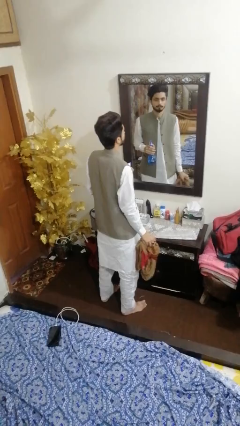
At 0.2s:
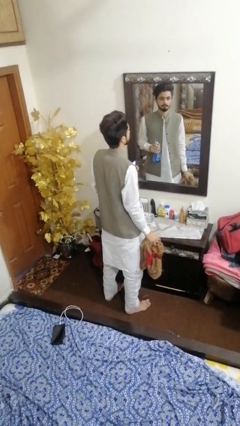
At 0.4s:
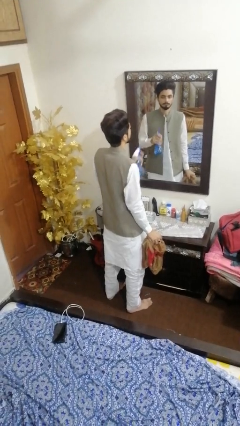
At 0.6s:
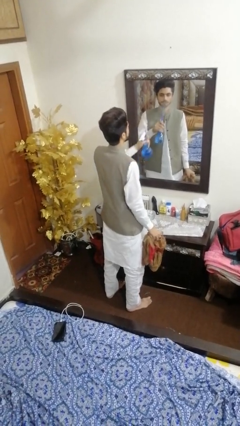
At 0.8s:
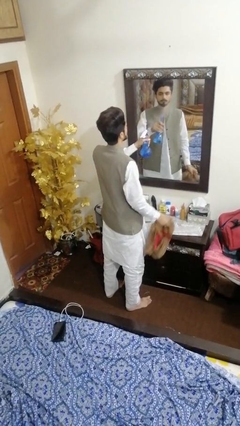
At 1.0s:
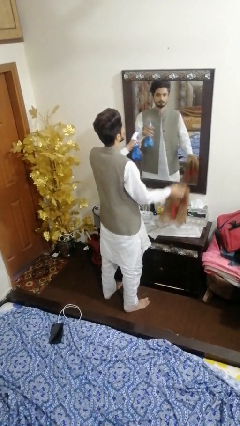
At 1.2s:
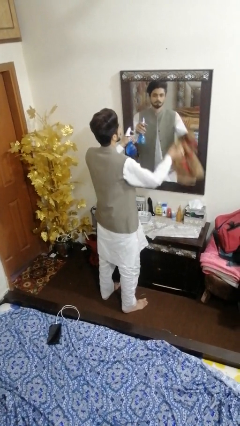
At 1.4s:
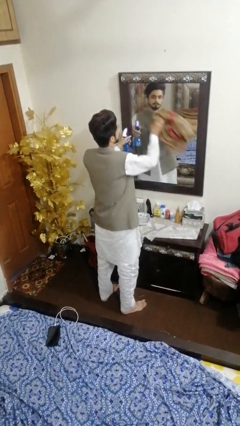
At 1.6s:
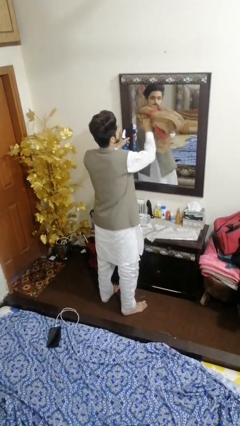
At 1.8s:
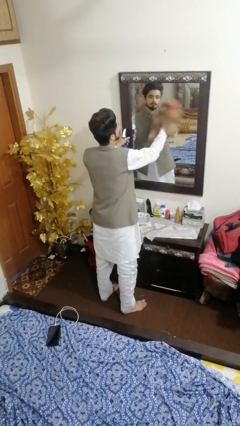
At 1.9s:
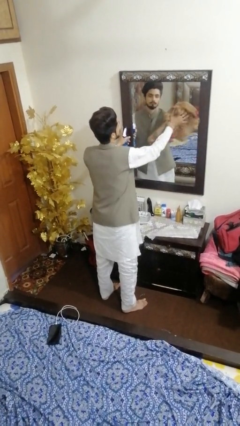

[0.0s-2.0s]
person sprays from bottle

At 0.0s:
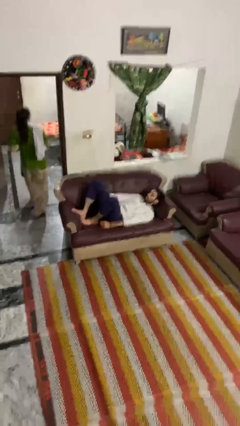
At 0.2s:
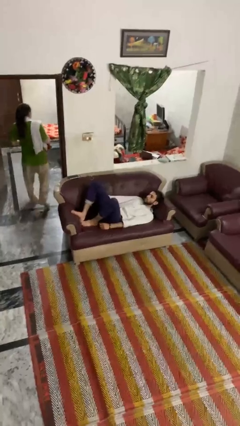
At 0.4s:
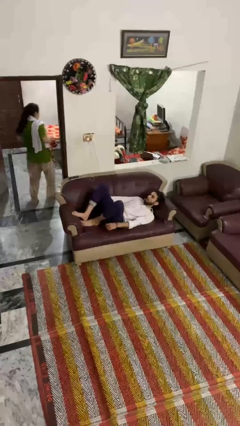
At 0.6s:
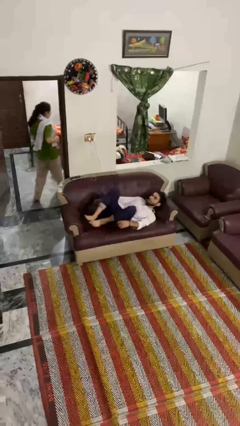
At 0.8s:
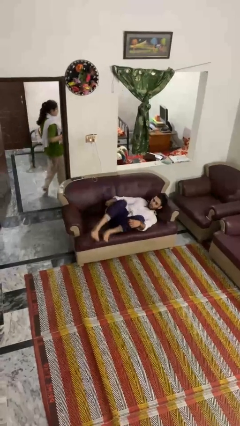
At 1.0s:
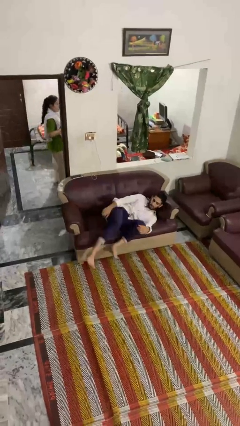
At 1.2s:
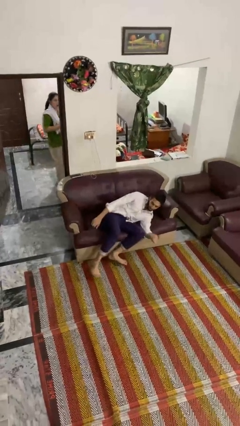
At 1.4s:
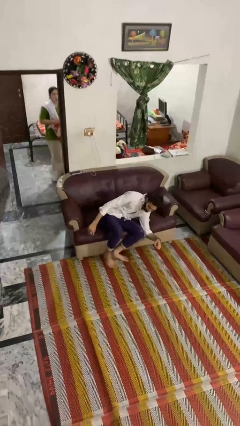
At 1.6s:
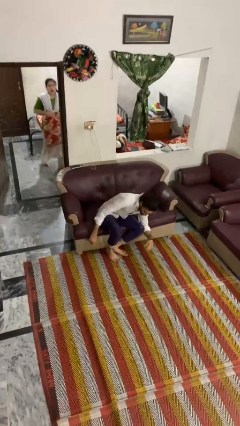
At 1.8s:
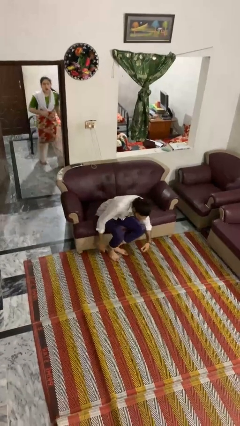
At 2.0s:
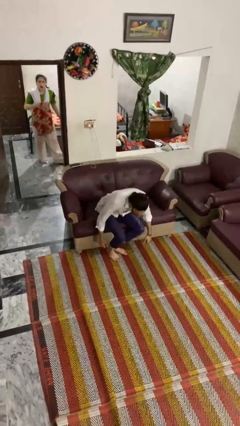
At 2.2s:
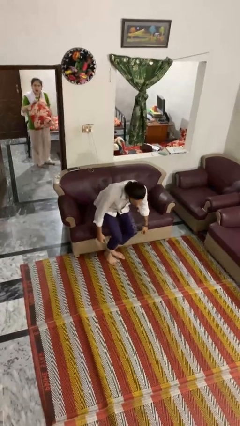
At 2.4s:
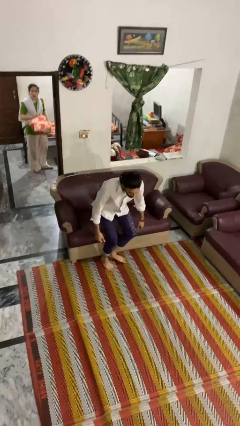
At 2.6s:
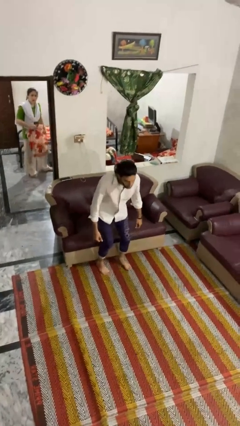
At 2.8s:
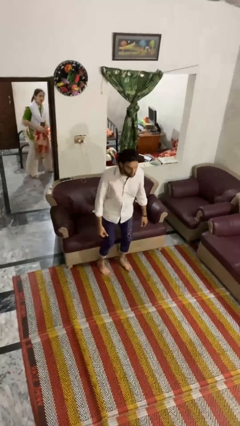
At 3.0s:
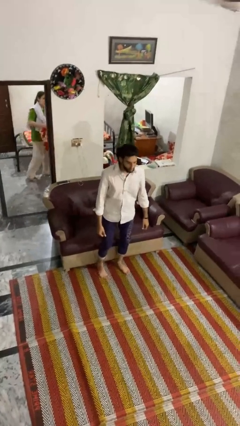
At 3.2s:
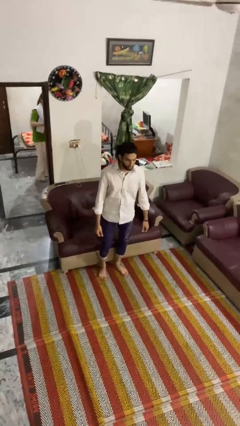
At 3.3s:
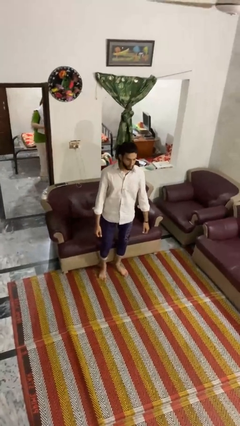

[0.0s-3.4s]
person stands up

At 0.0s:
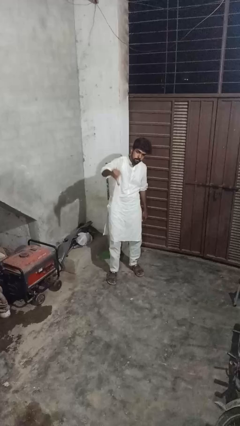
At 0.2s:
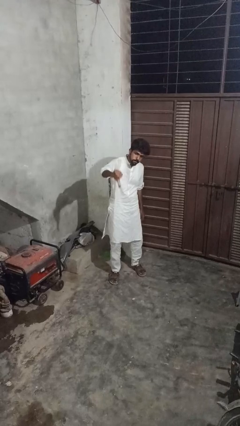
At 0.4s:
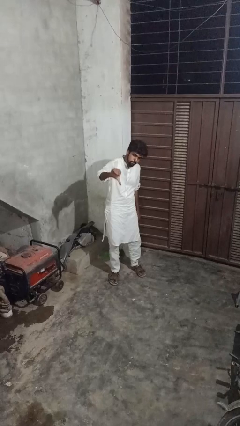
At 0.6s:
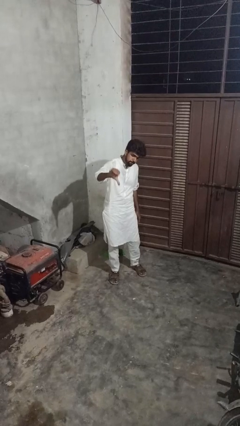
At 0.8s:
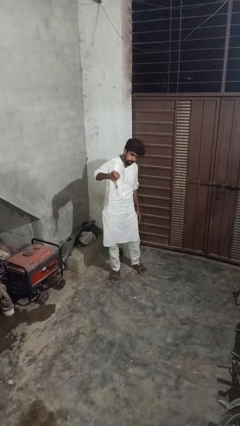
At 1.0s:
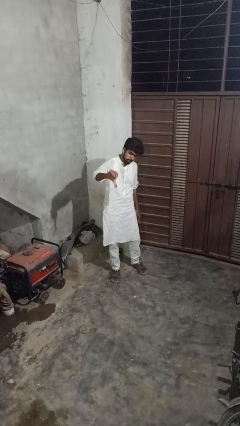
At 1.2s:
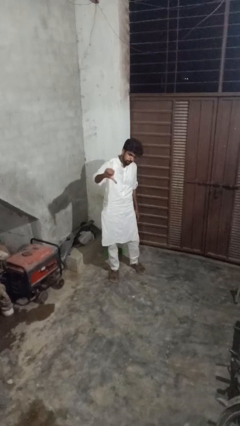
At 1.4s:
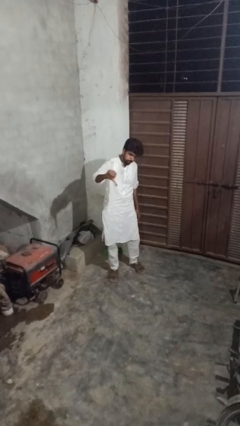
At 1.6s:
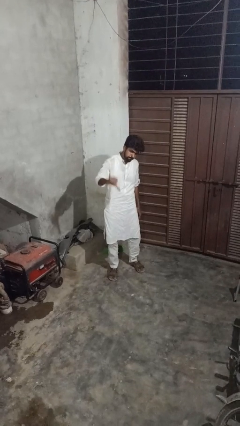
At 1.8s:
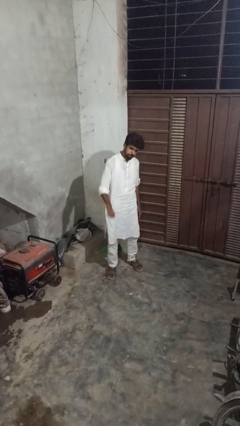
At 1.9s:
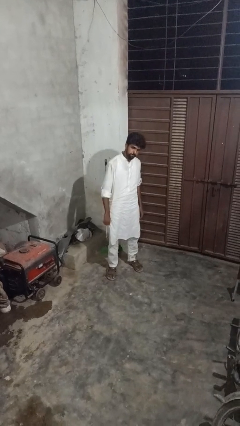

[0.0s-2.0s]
person gestures thumbs down

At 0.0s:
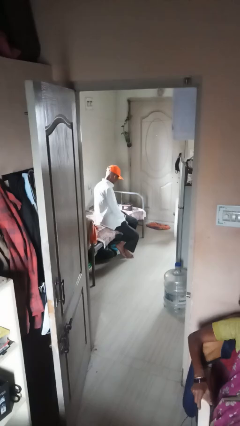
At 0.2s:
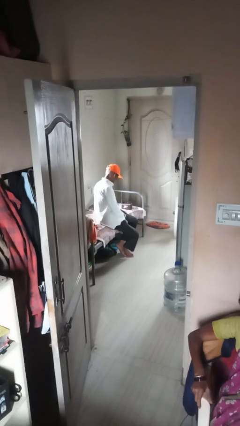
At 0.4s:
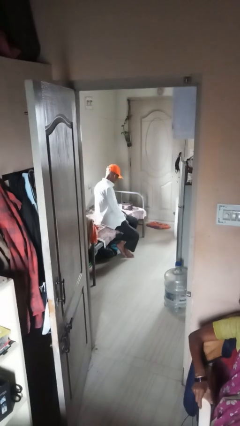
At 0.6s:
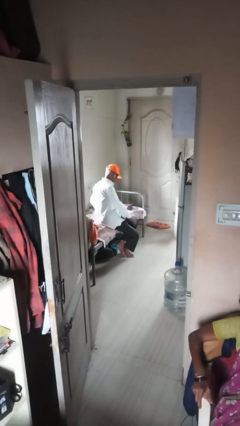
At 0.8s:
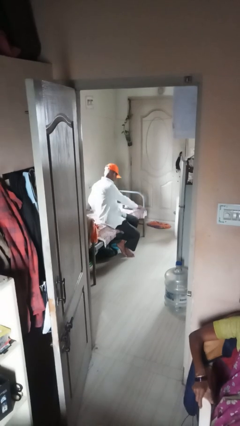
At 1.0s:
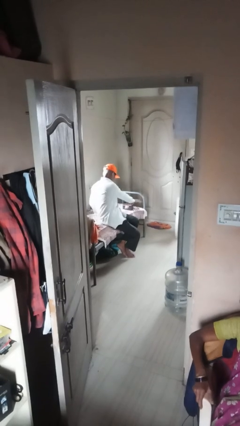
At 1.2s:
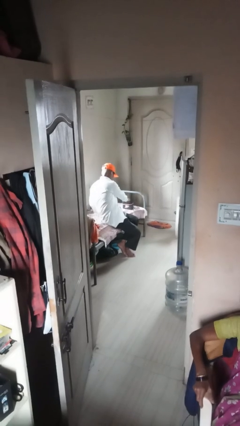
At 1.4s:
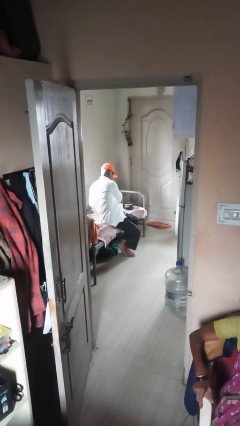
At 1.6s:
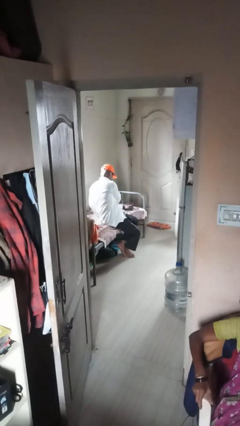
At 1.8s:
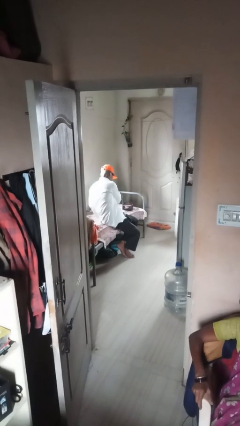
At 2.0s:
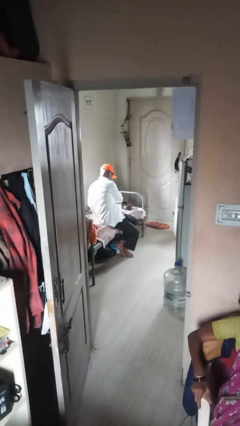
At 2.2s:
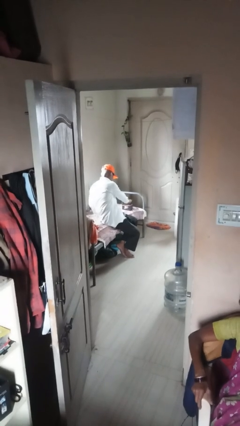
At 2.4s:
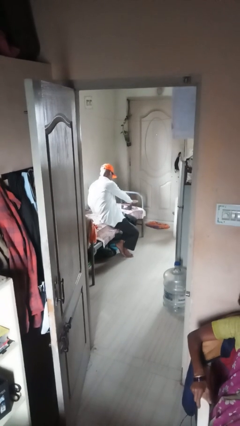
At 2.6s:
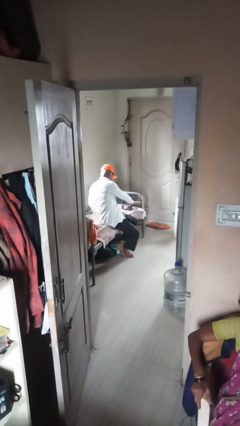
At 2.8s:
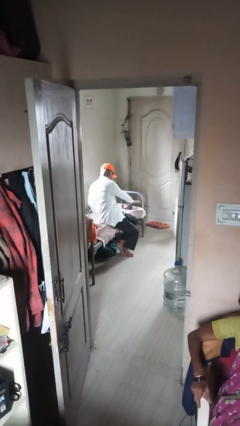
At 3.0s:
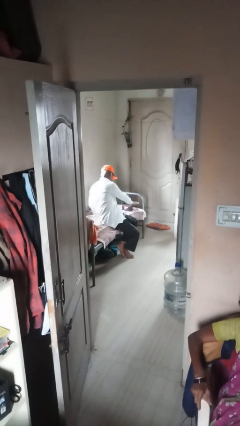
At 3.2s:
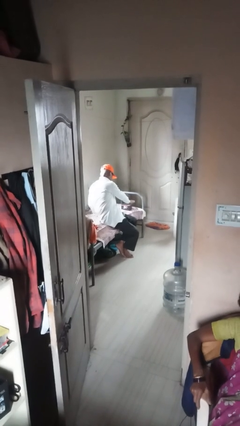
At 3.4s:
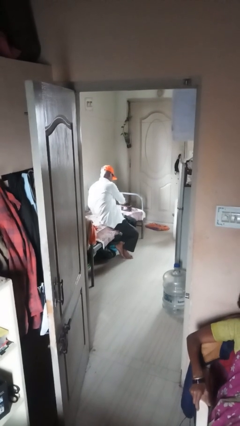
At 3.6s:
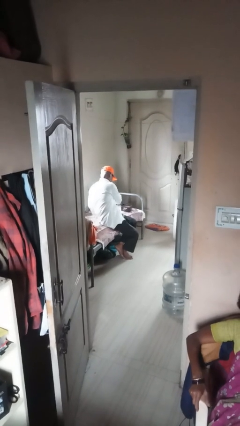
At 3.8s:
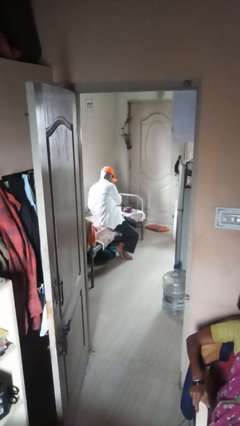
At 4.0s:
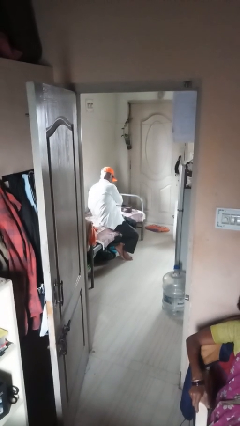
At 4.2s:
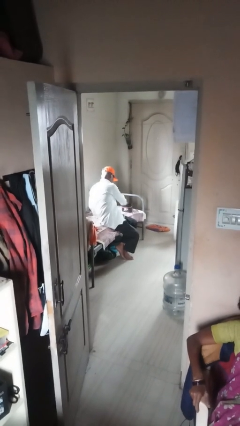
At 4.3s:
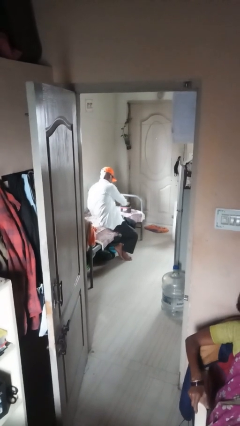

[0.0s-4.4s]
person waves hand over object

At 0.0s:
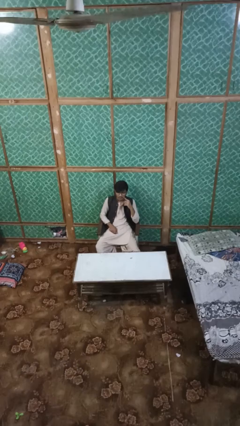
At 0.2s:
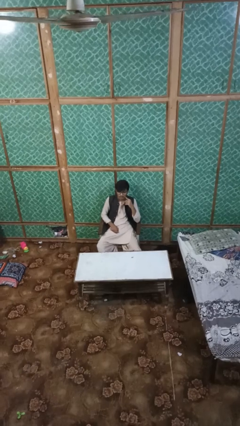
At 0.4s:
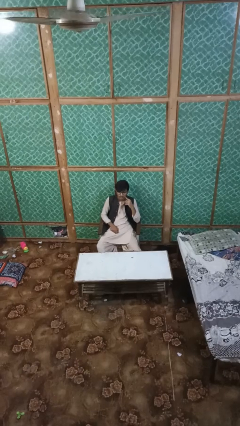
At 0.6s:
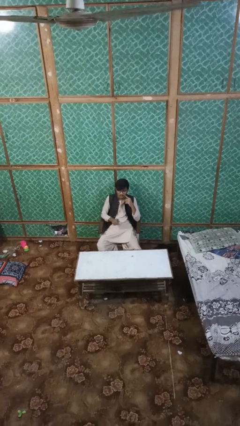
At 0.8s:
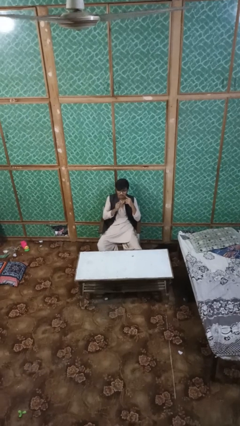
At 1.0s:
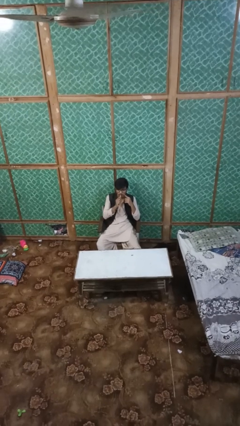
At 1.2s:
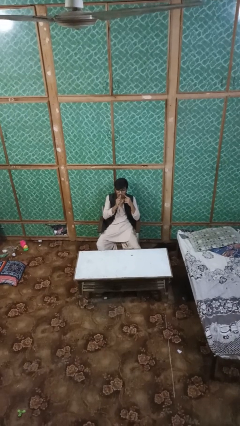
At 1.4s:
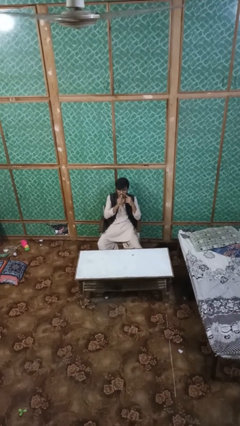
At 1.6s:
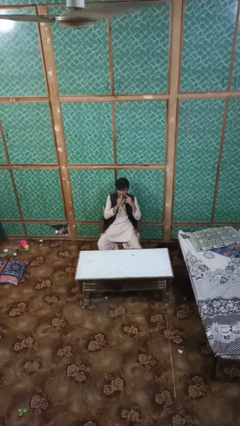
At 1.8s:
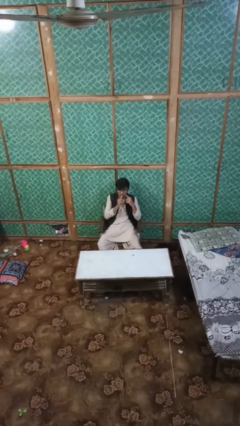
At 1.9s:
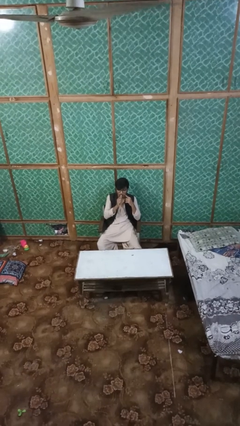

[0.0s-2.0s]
person vapes

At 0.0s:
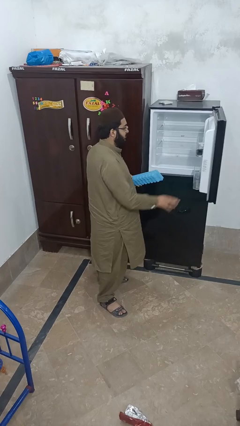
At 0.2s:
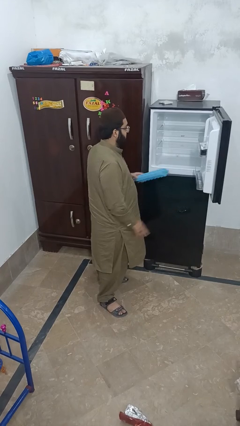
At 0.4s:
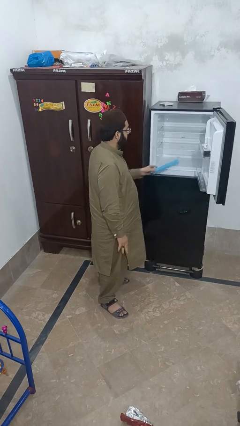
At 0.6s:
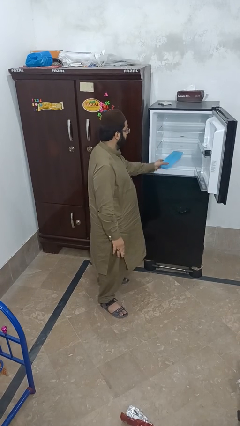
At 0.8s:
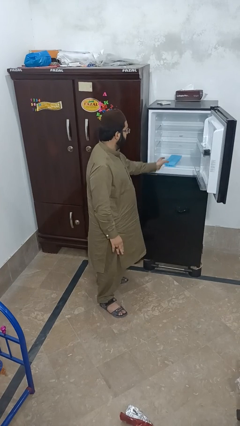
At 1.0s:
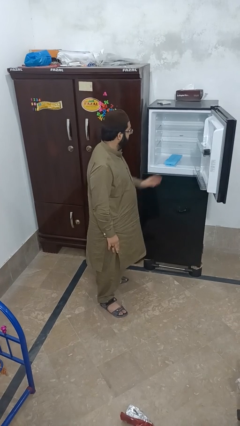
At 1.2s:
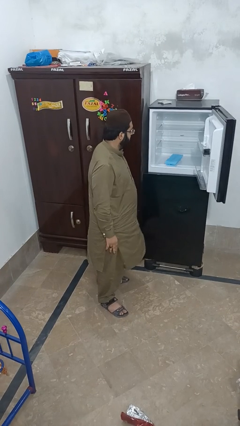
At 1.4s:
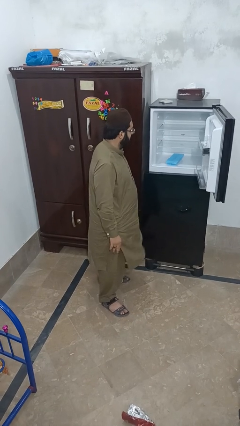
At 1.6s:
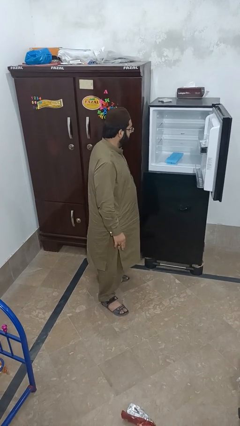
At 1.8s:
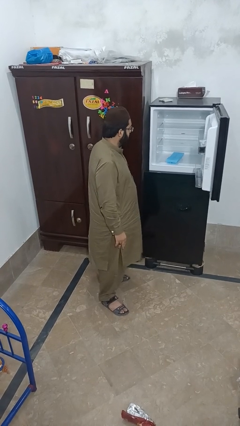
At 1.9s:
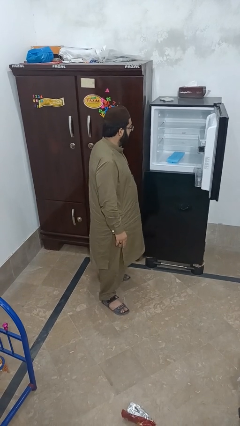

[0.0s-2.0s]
person puts object into refrigerator

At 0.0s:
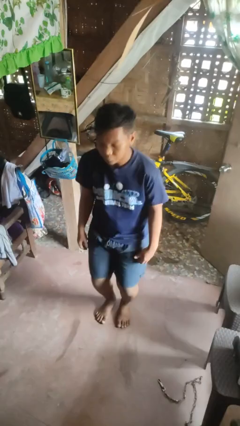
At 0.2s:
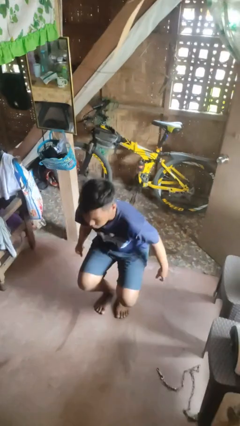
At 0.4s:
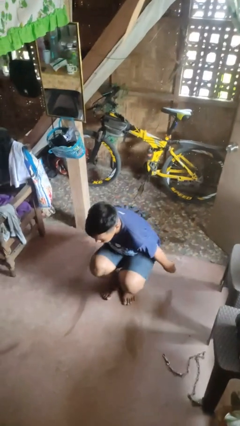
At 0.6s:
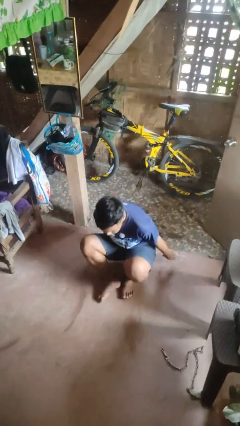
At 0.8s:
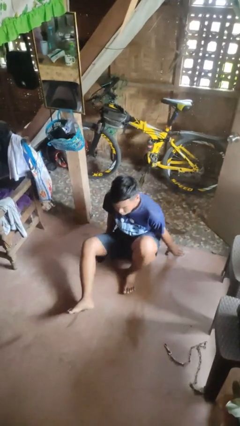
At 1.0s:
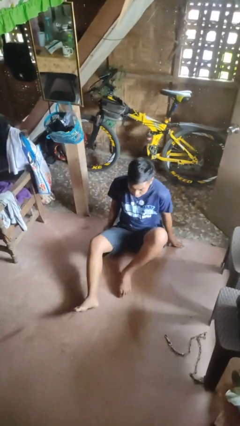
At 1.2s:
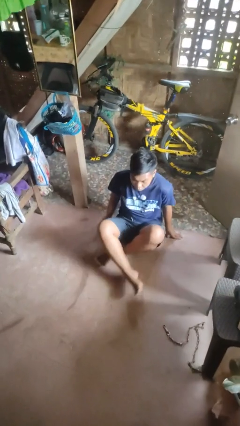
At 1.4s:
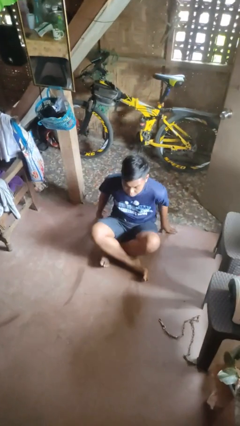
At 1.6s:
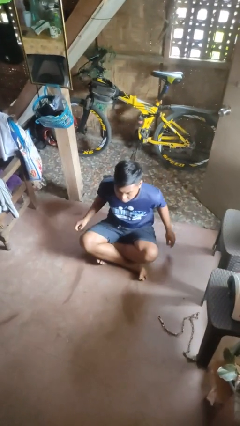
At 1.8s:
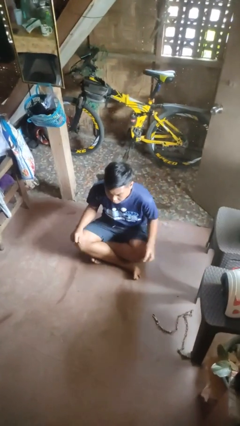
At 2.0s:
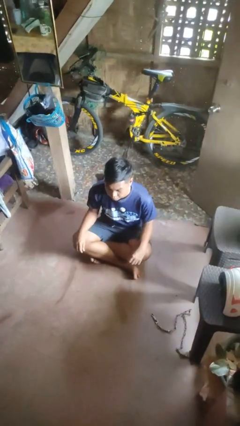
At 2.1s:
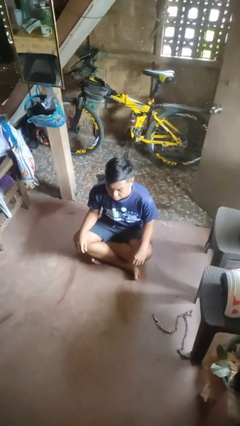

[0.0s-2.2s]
person sits crisscross
